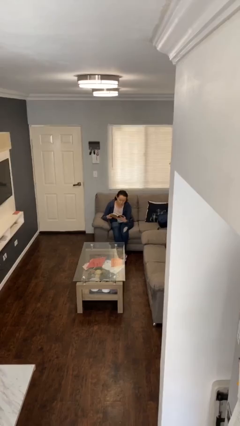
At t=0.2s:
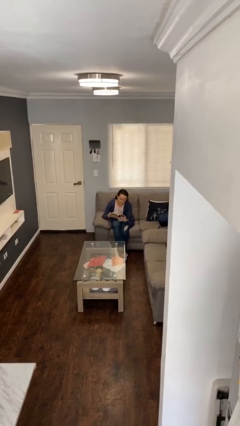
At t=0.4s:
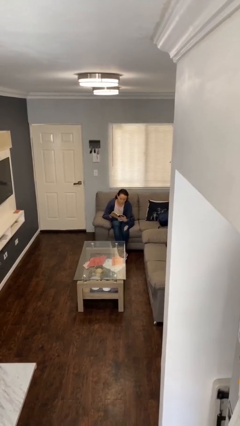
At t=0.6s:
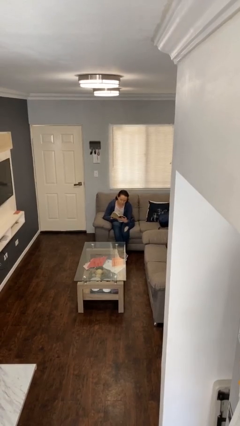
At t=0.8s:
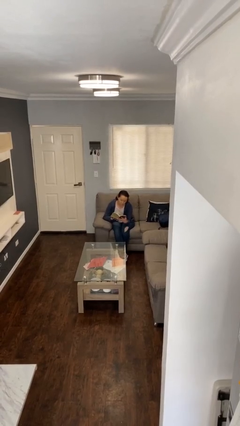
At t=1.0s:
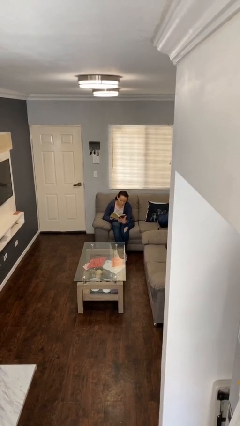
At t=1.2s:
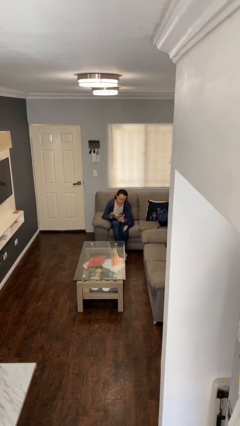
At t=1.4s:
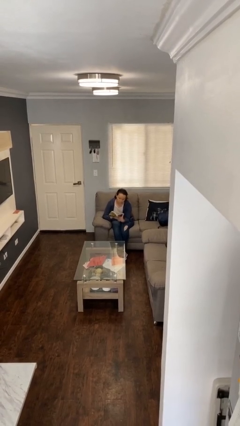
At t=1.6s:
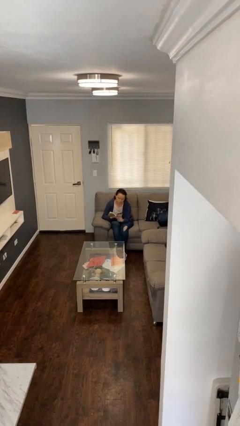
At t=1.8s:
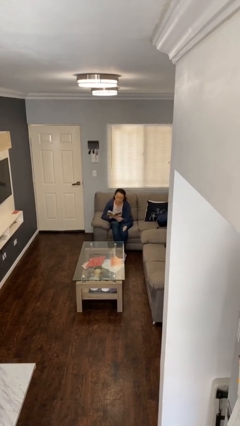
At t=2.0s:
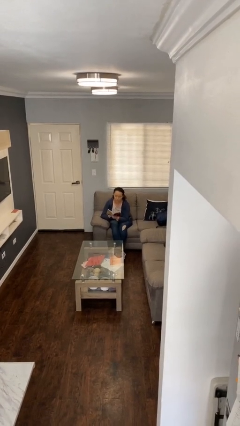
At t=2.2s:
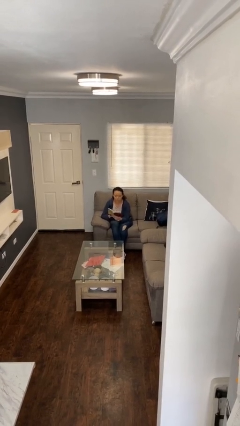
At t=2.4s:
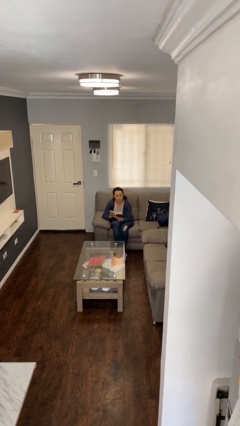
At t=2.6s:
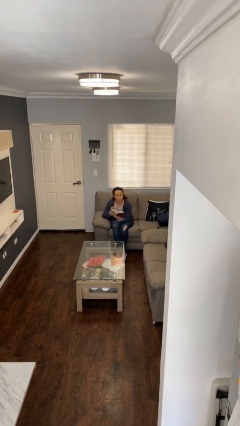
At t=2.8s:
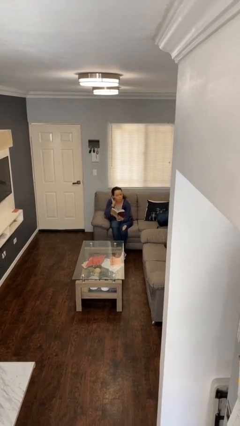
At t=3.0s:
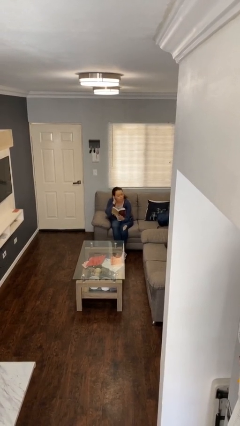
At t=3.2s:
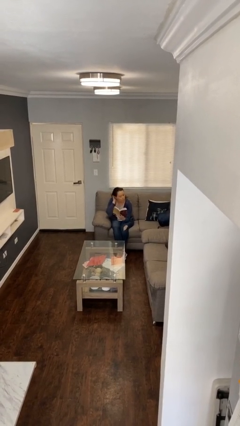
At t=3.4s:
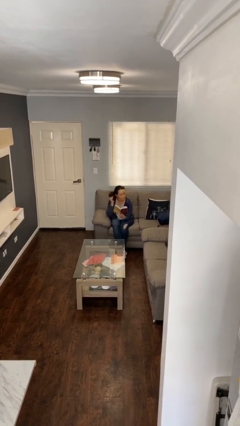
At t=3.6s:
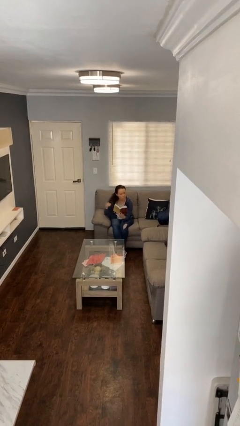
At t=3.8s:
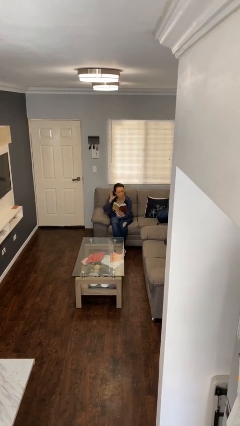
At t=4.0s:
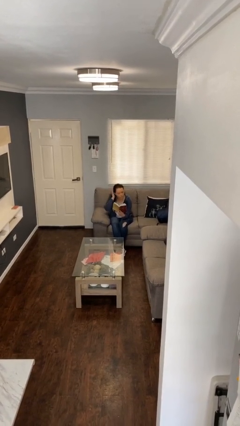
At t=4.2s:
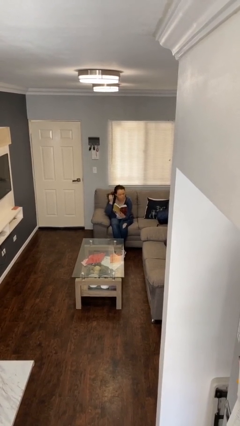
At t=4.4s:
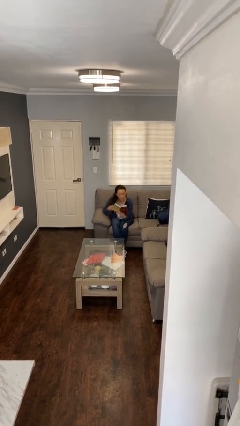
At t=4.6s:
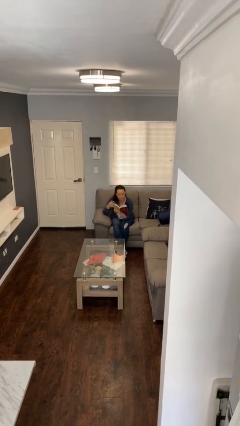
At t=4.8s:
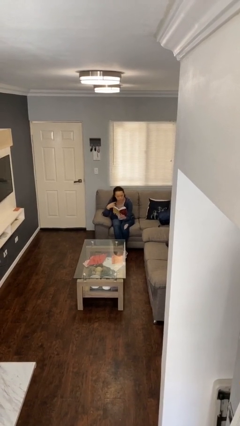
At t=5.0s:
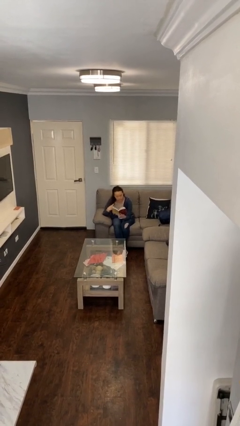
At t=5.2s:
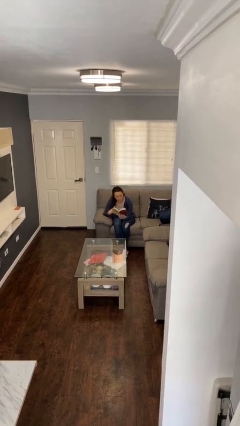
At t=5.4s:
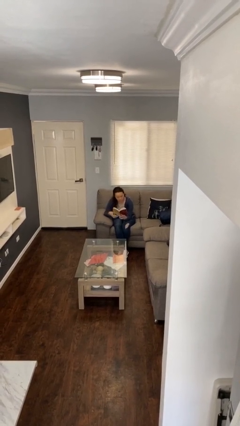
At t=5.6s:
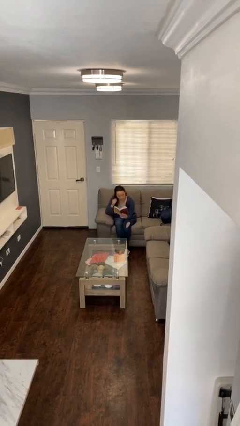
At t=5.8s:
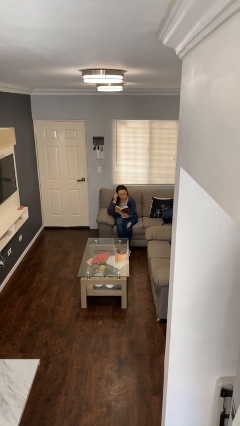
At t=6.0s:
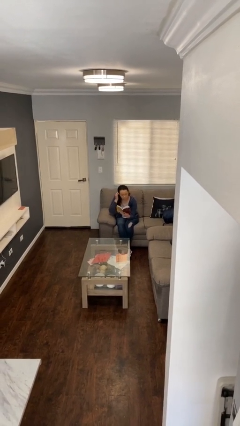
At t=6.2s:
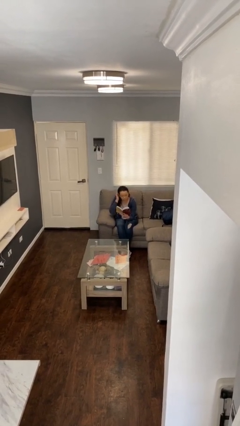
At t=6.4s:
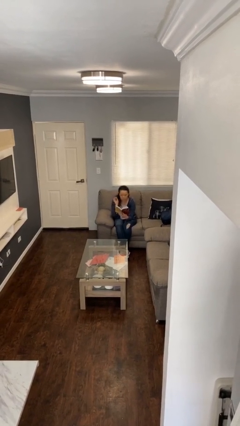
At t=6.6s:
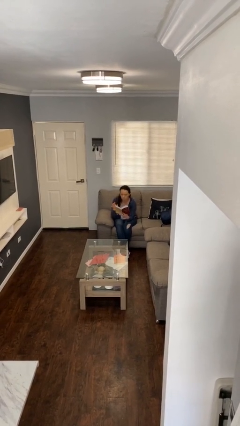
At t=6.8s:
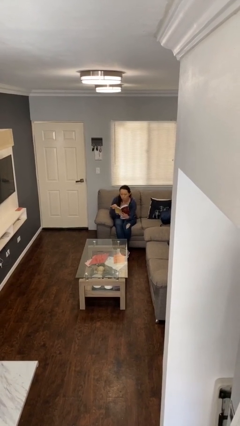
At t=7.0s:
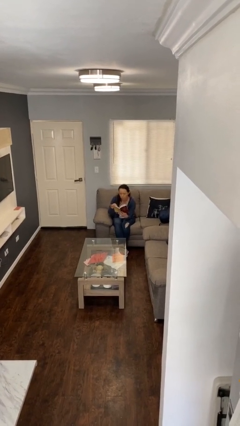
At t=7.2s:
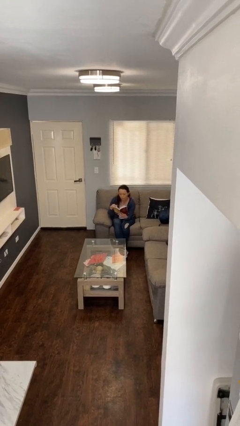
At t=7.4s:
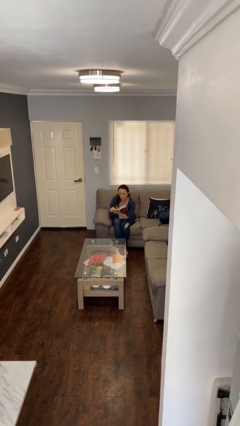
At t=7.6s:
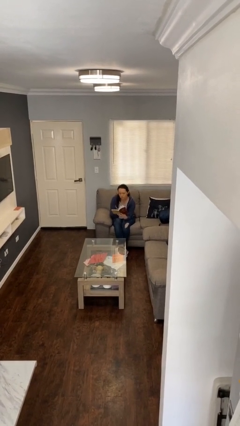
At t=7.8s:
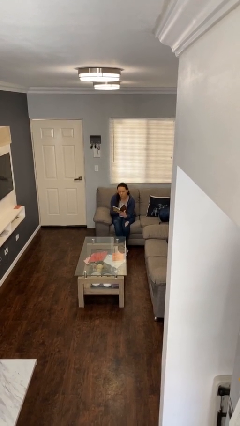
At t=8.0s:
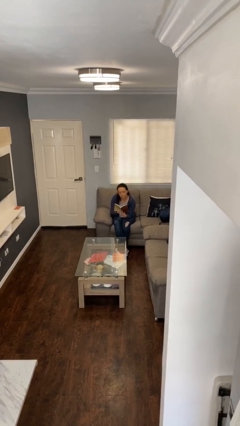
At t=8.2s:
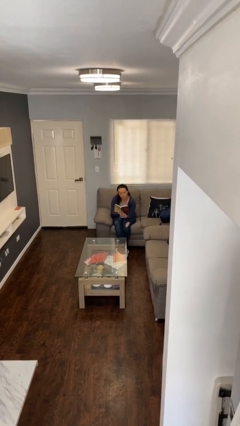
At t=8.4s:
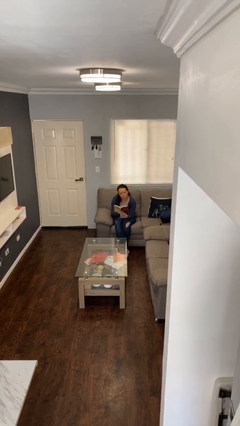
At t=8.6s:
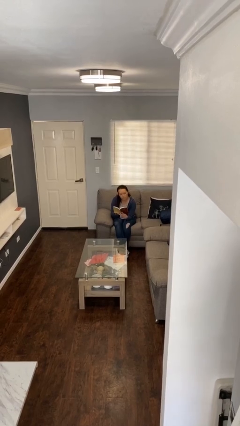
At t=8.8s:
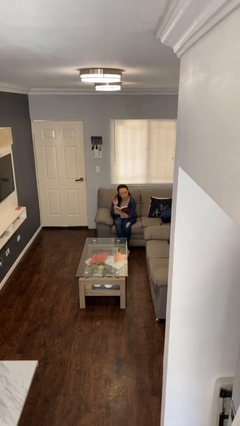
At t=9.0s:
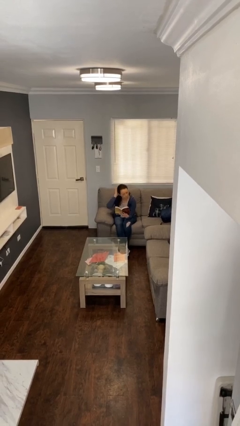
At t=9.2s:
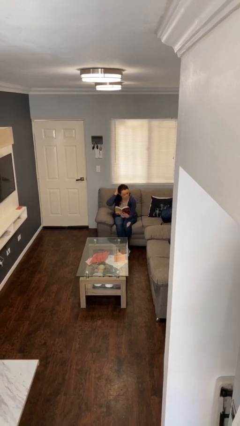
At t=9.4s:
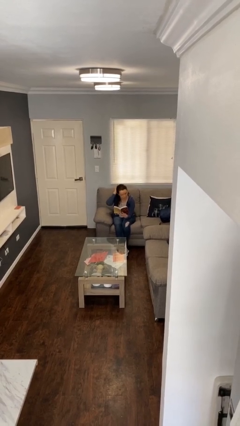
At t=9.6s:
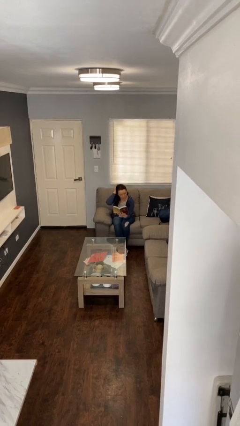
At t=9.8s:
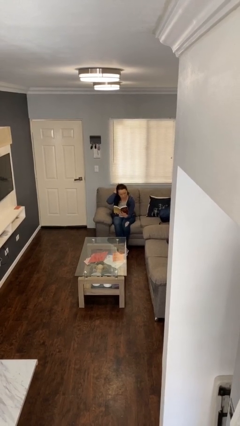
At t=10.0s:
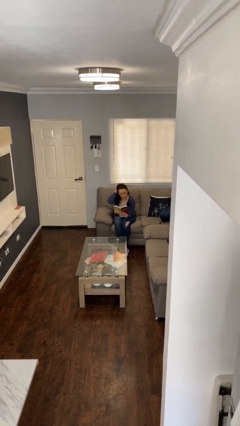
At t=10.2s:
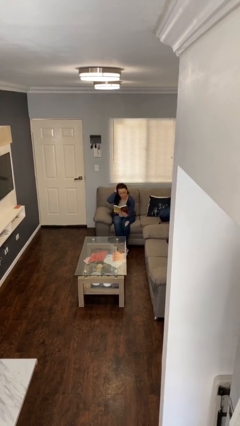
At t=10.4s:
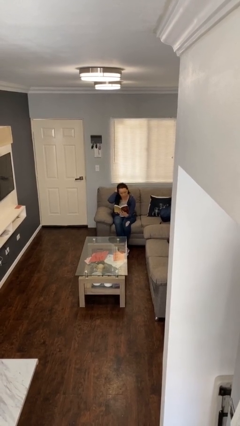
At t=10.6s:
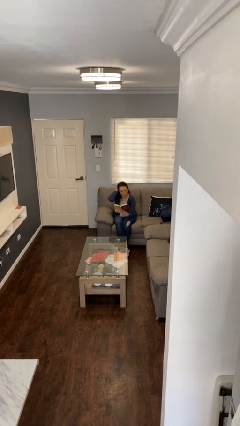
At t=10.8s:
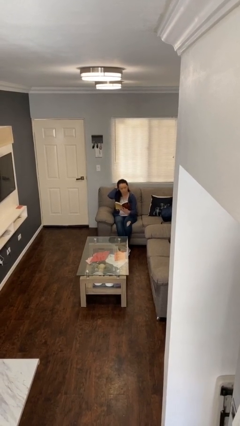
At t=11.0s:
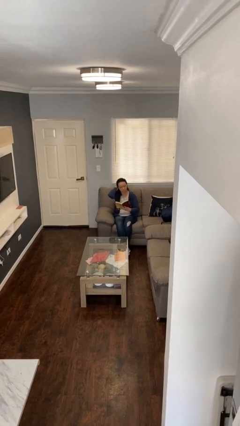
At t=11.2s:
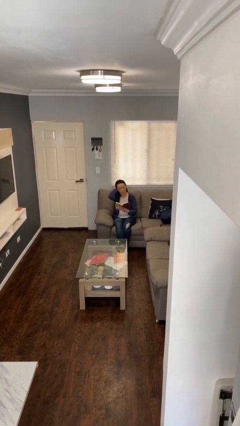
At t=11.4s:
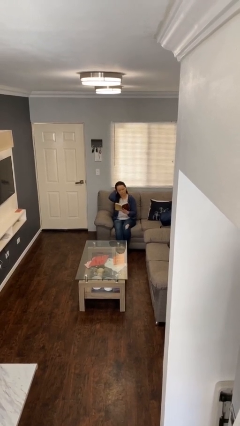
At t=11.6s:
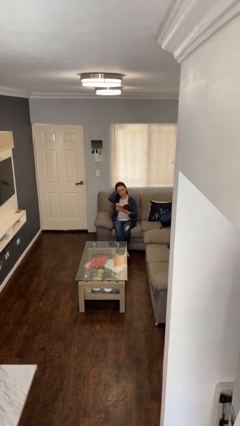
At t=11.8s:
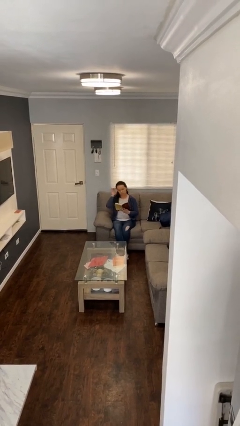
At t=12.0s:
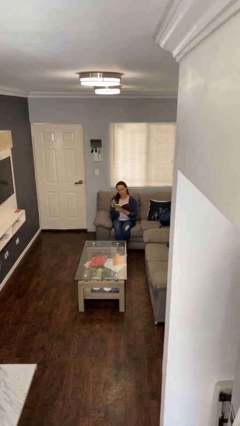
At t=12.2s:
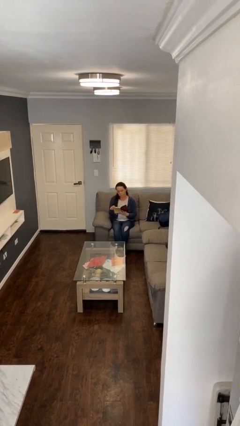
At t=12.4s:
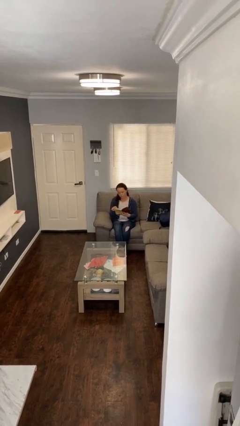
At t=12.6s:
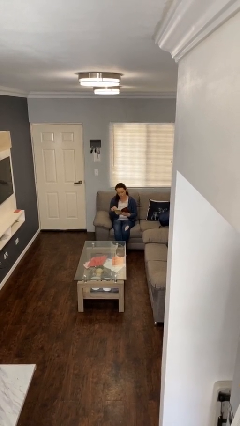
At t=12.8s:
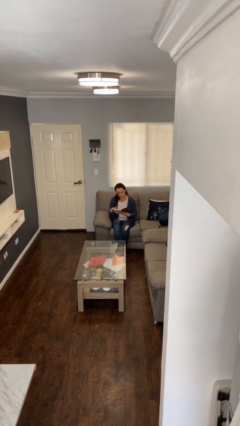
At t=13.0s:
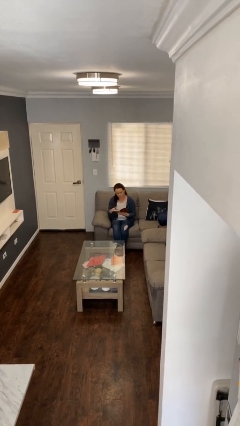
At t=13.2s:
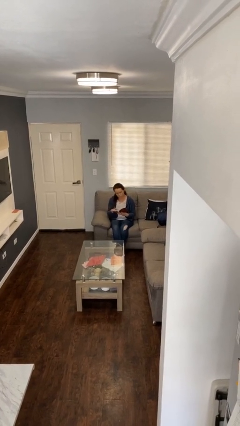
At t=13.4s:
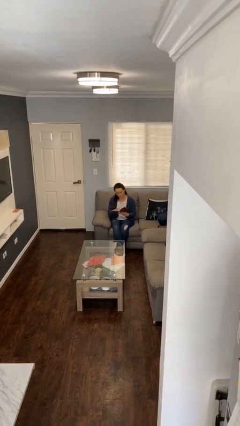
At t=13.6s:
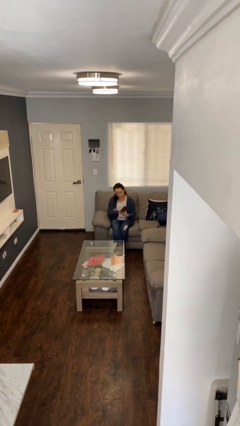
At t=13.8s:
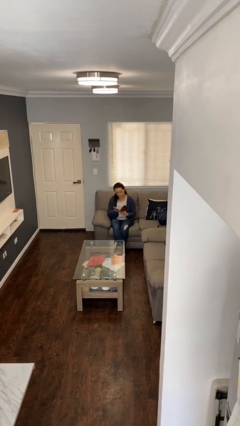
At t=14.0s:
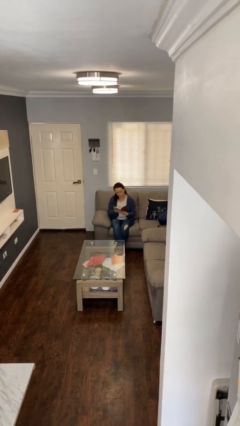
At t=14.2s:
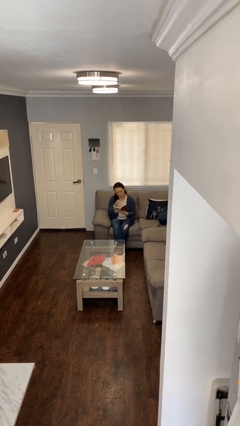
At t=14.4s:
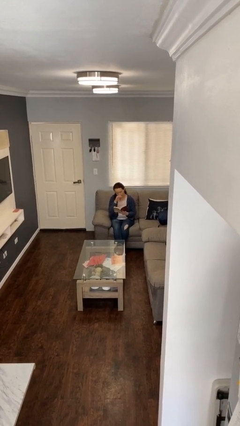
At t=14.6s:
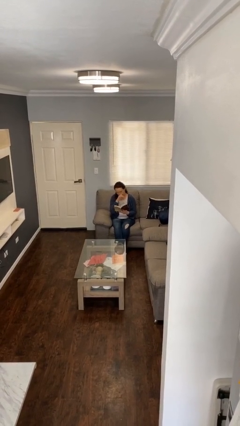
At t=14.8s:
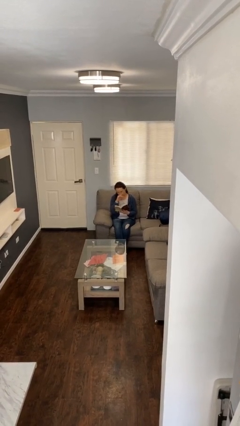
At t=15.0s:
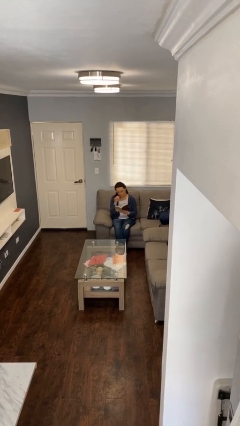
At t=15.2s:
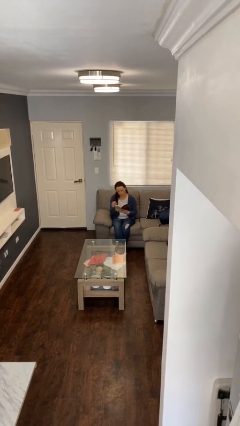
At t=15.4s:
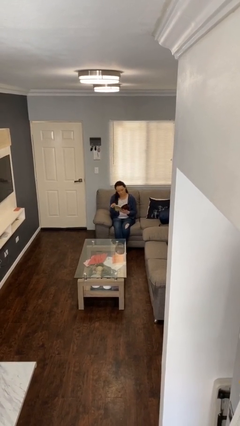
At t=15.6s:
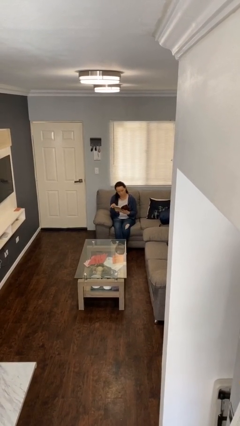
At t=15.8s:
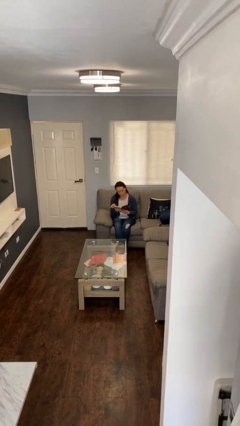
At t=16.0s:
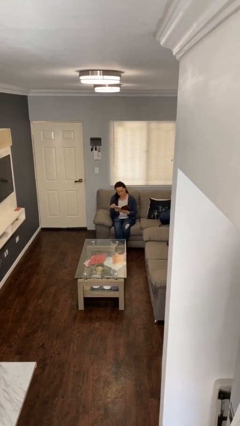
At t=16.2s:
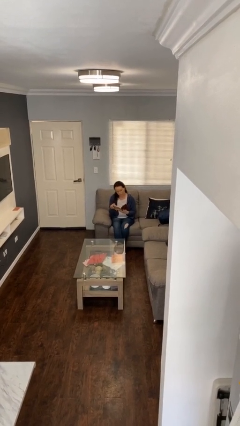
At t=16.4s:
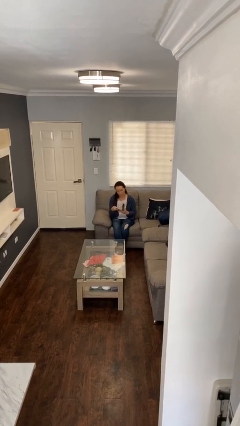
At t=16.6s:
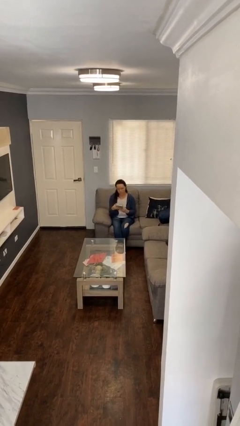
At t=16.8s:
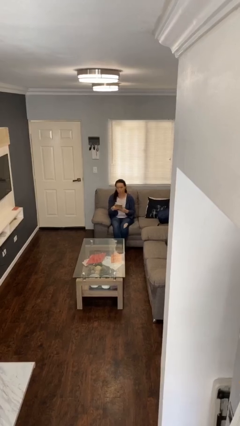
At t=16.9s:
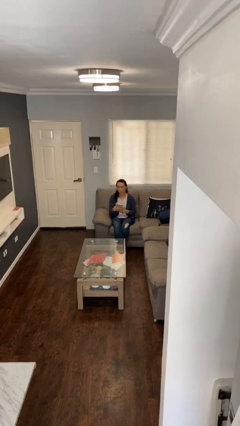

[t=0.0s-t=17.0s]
person reads document

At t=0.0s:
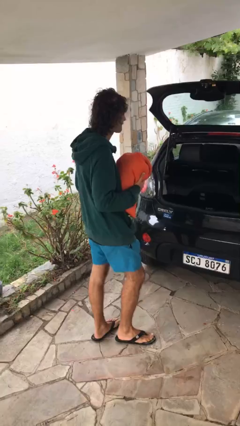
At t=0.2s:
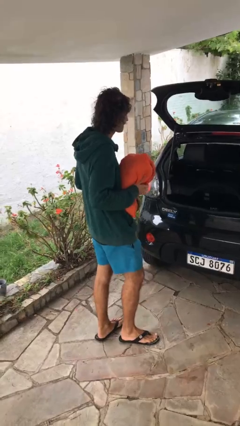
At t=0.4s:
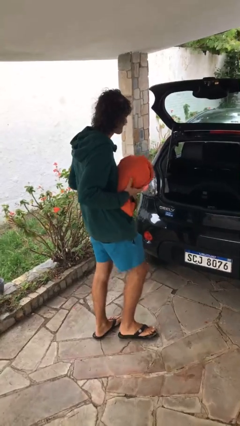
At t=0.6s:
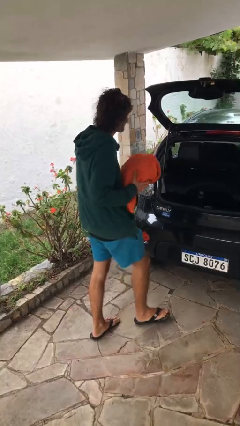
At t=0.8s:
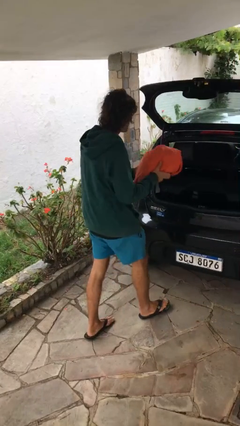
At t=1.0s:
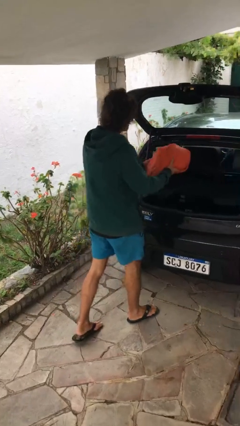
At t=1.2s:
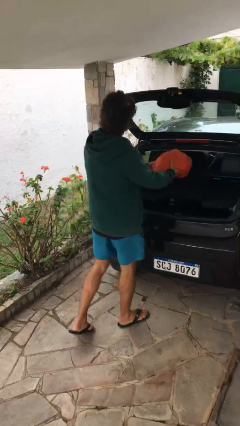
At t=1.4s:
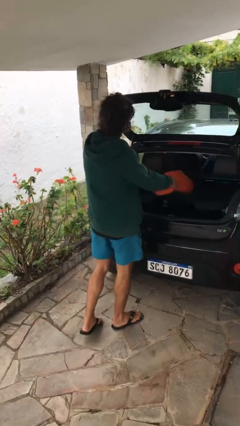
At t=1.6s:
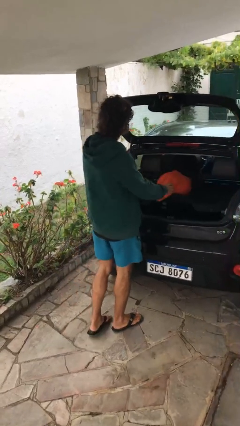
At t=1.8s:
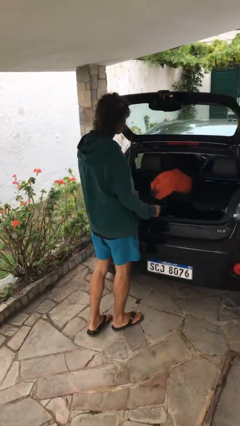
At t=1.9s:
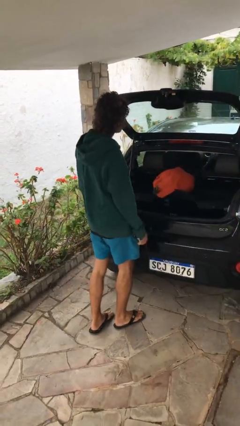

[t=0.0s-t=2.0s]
person loads car
